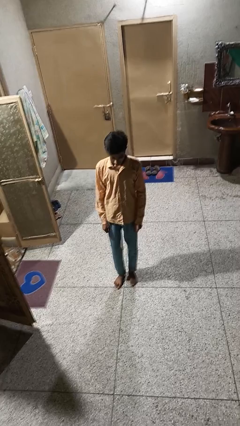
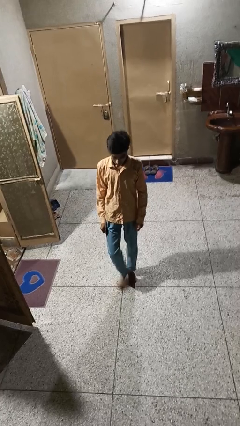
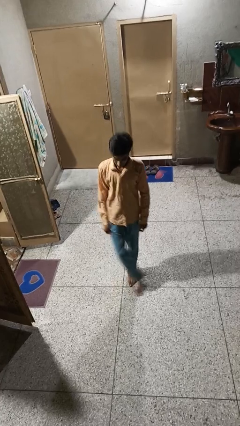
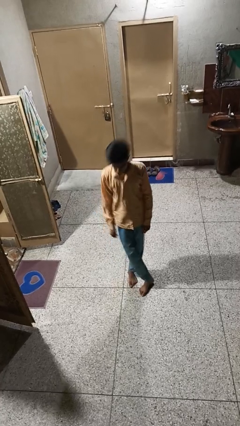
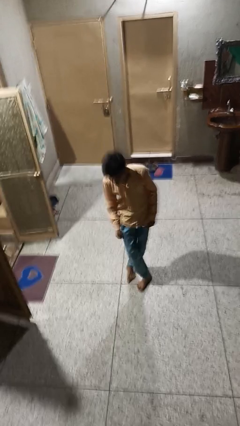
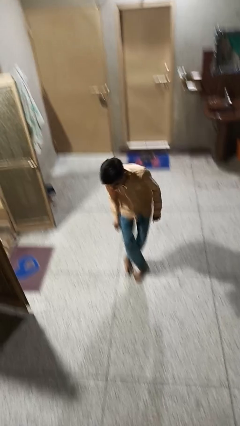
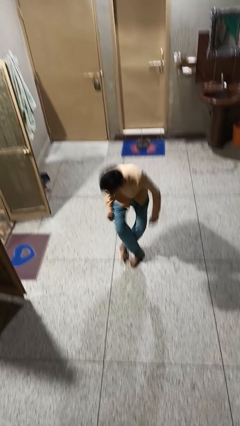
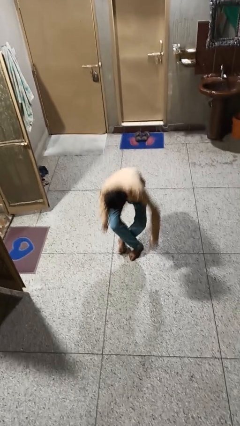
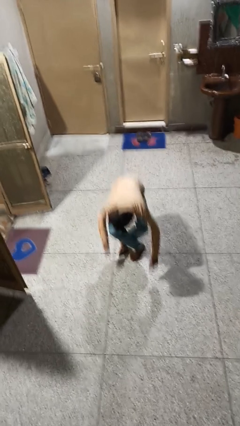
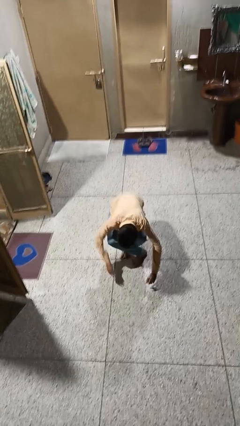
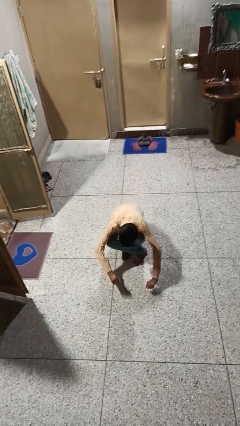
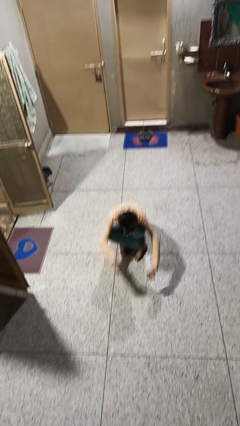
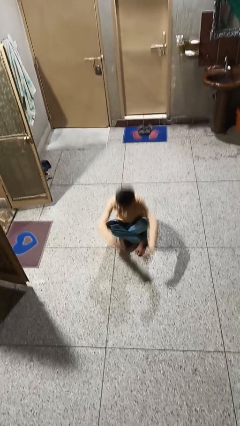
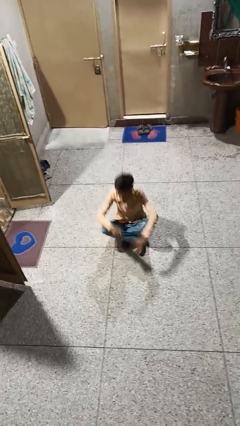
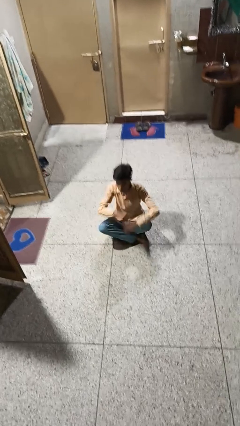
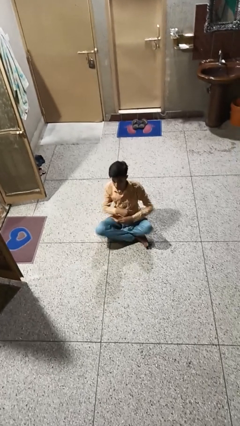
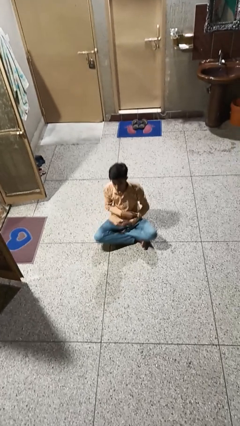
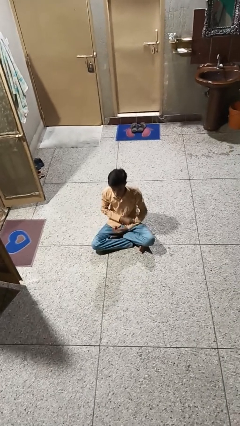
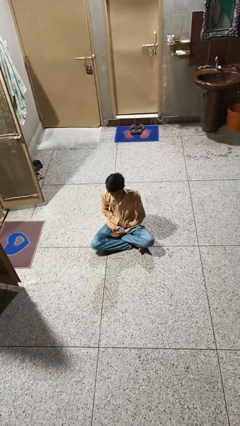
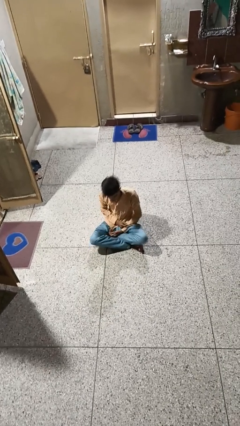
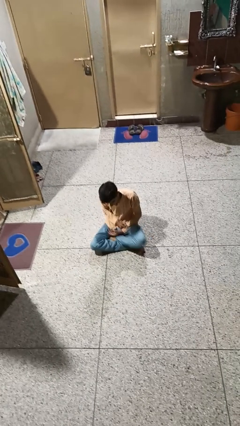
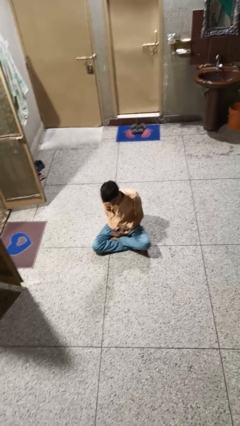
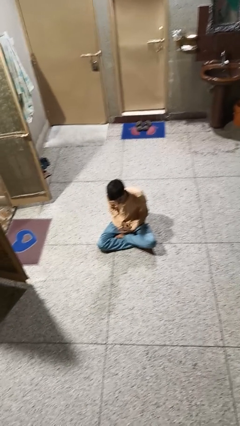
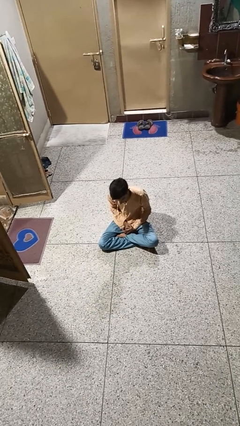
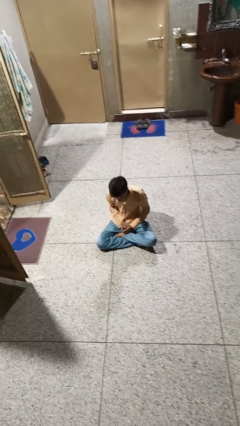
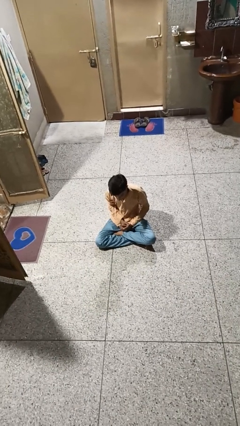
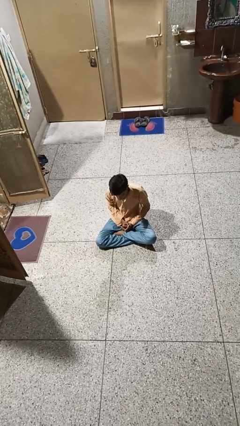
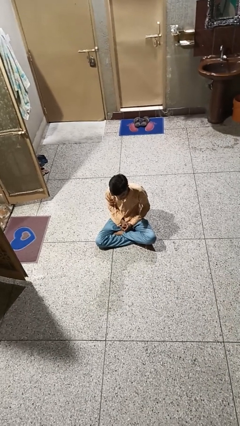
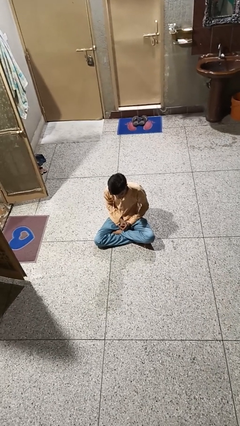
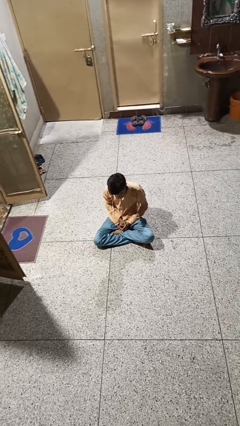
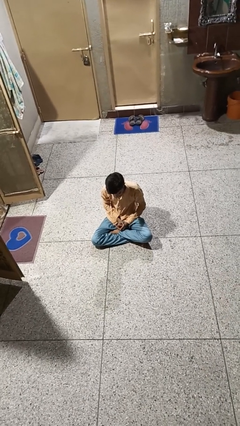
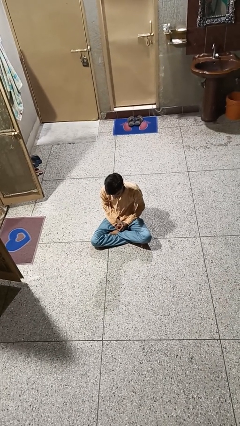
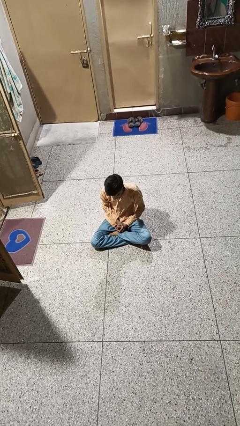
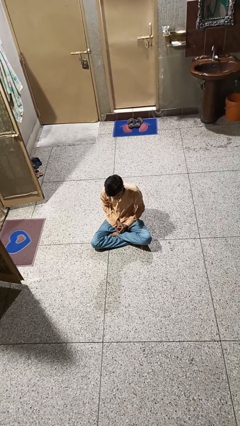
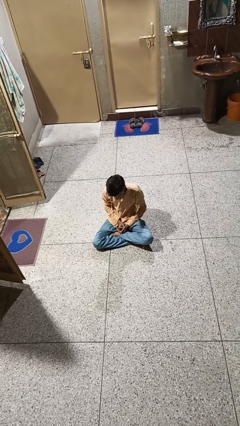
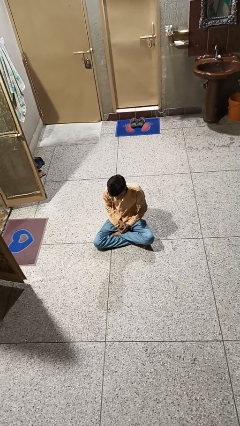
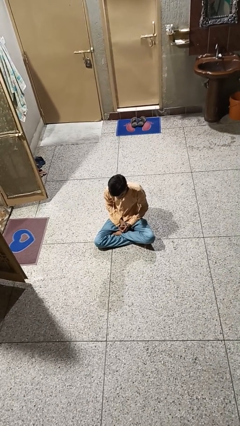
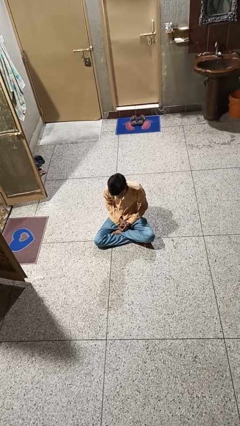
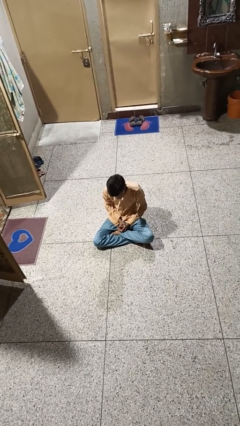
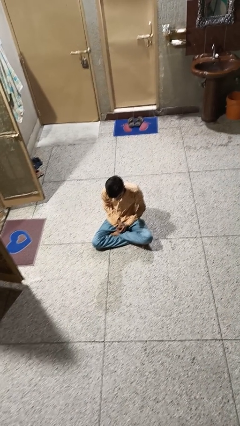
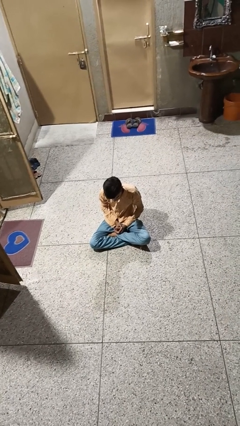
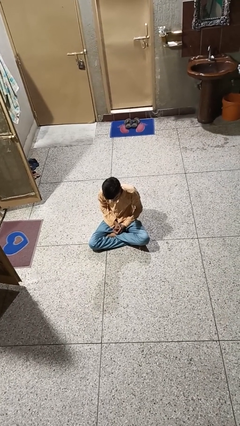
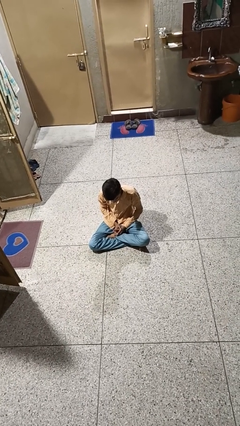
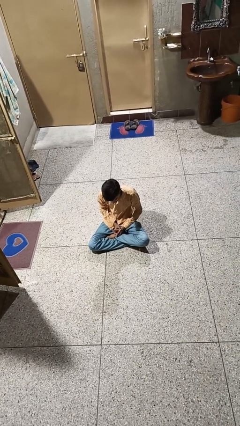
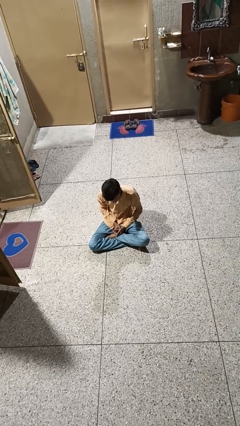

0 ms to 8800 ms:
person sits crisscross

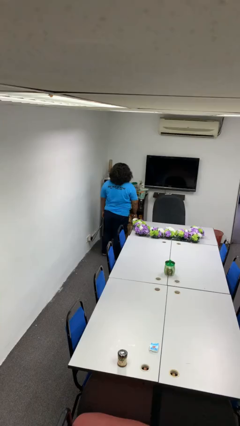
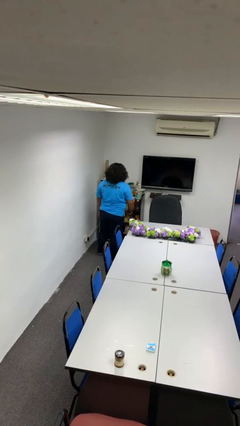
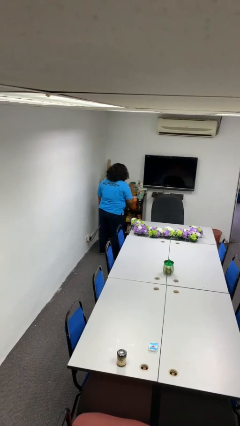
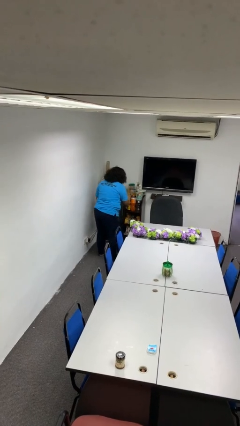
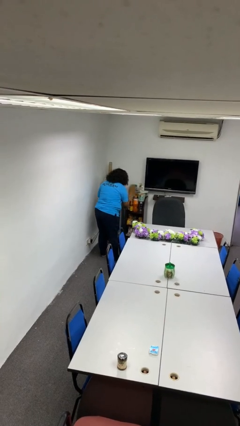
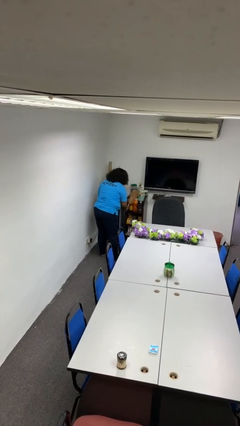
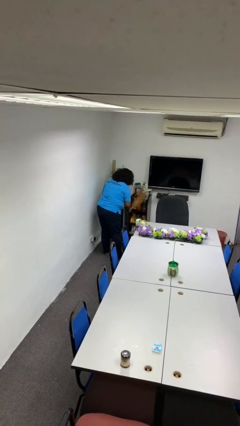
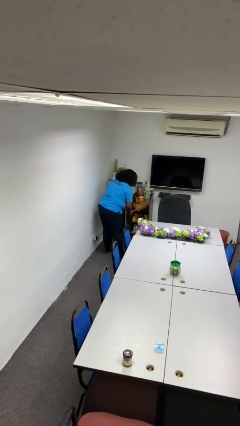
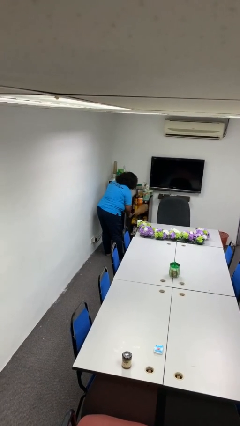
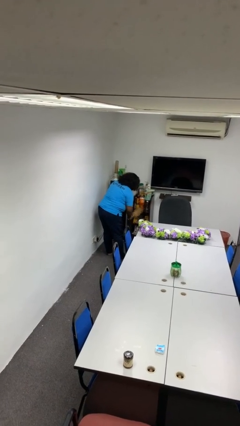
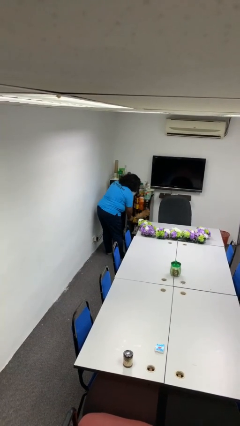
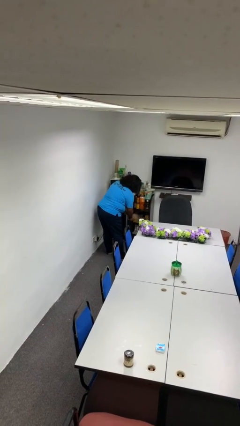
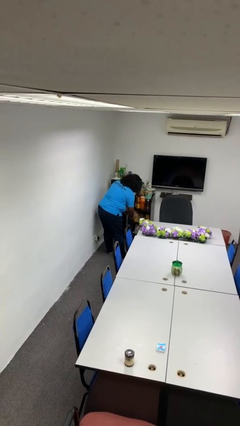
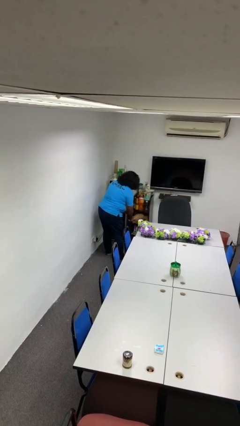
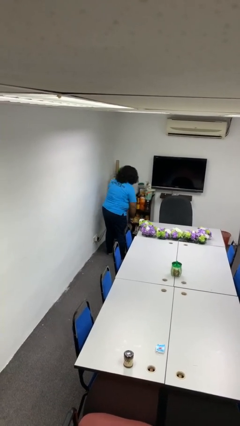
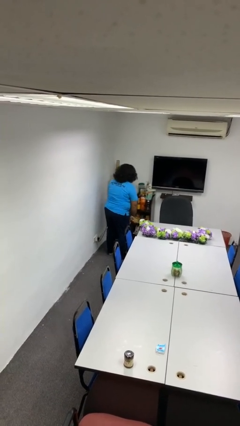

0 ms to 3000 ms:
person dusts furniture

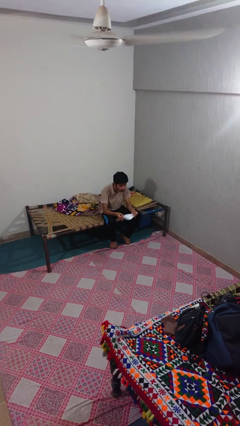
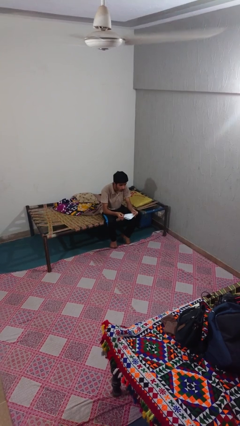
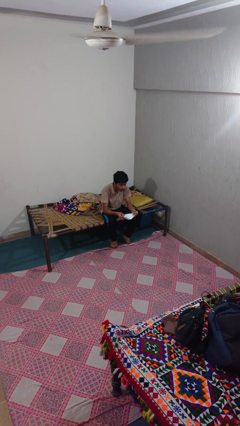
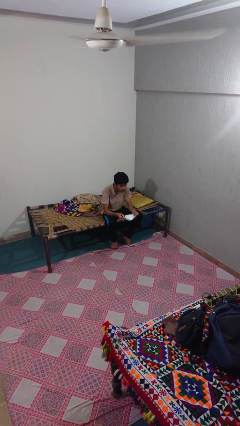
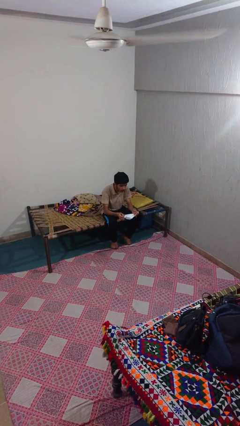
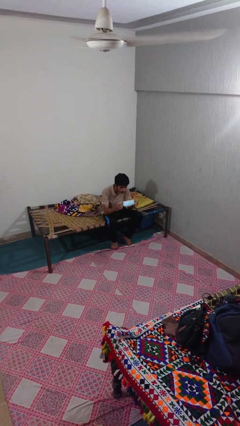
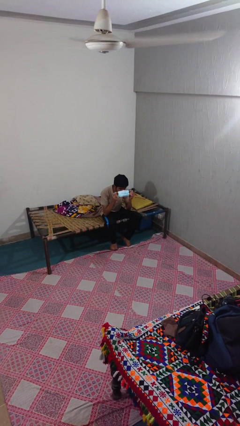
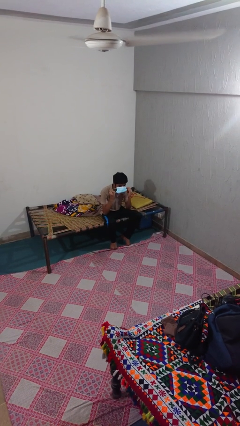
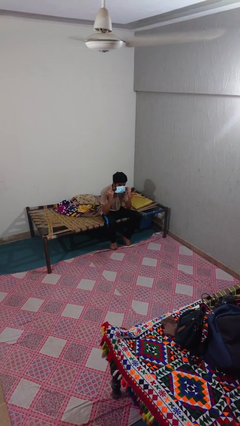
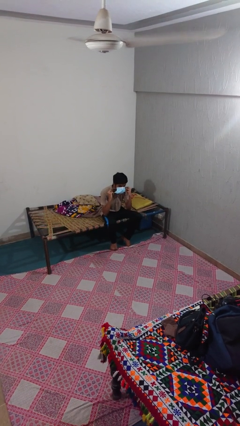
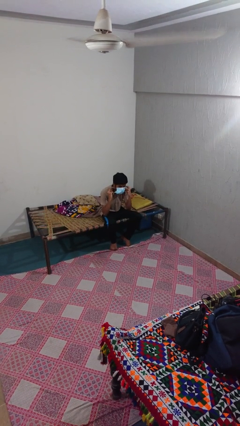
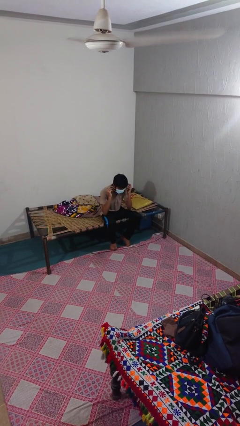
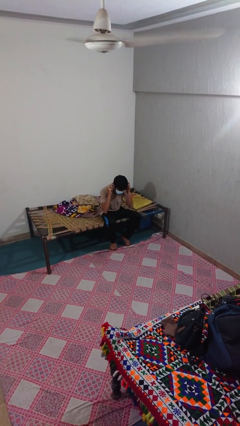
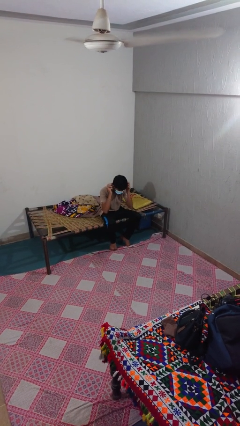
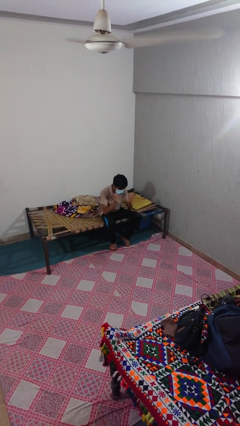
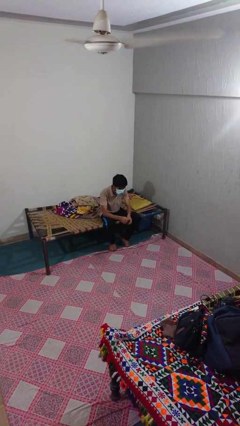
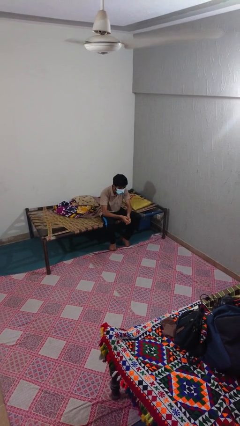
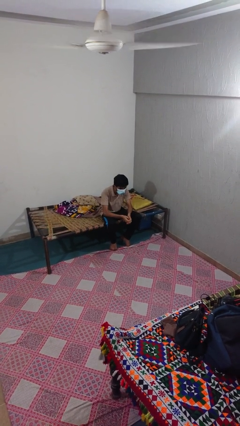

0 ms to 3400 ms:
person puts on facemask

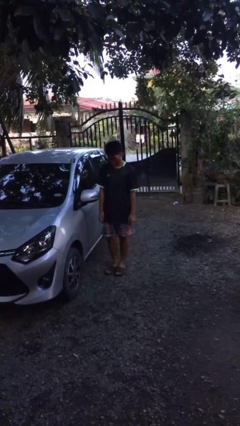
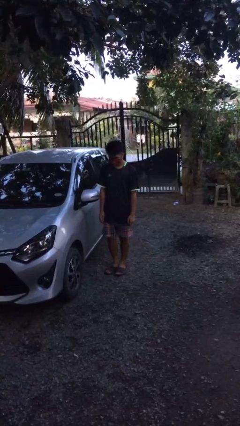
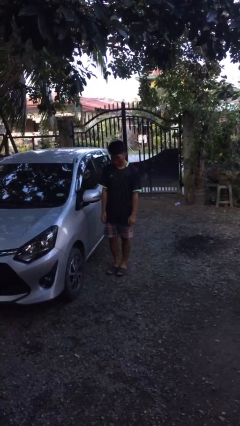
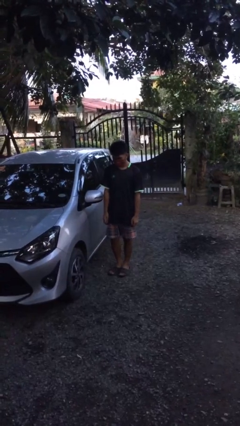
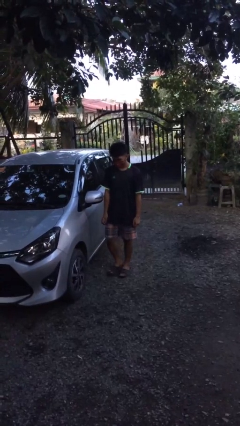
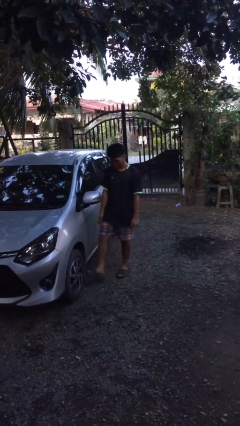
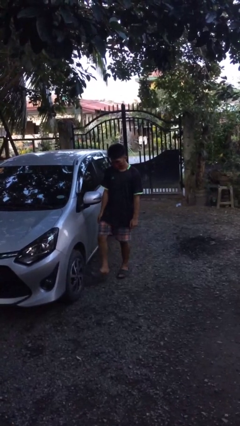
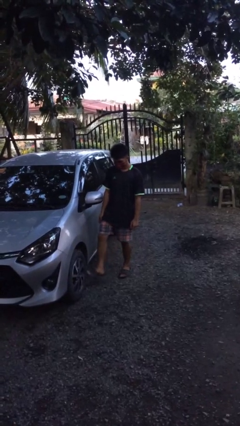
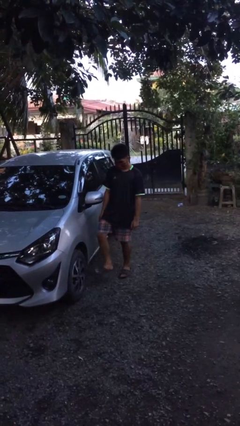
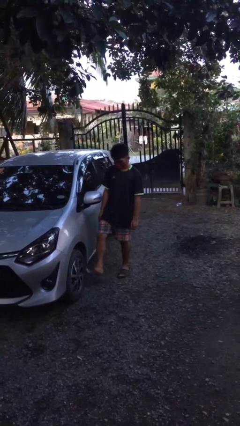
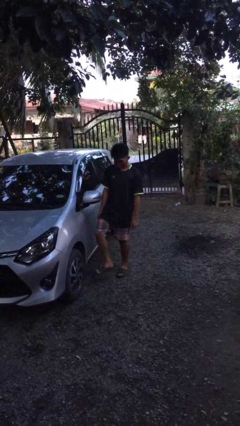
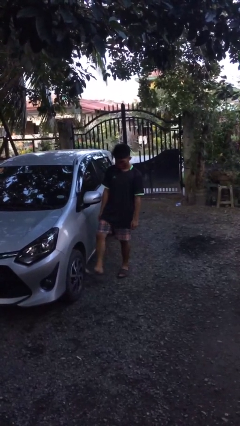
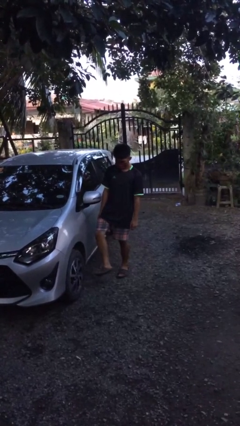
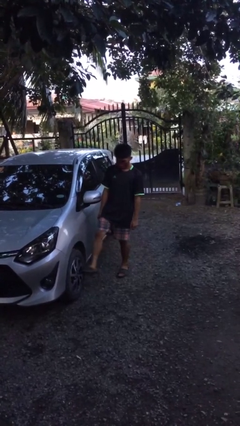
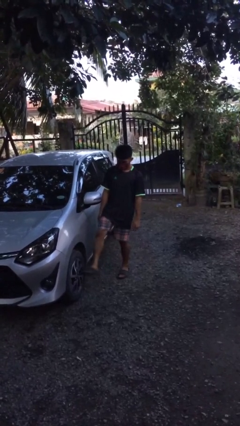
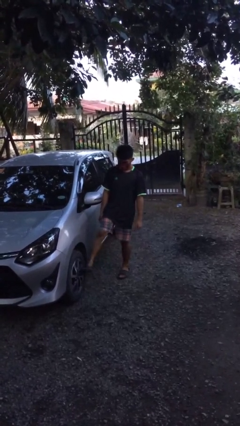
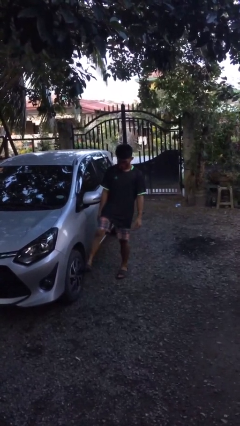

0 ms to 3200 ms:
person kicks car tires
